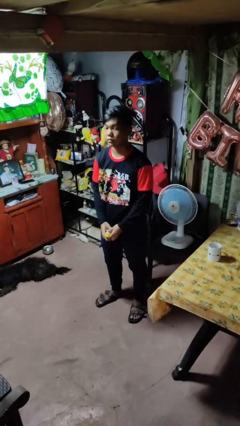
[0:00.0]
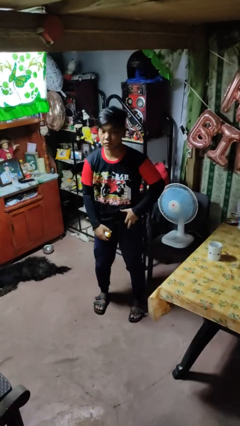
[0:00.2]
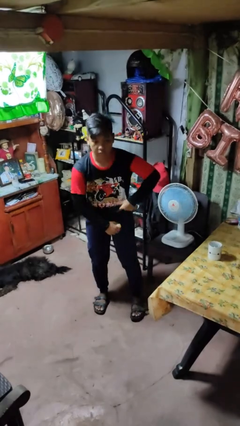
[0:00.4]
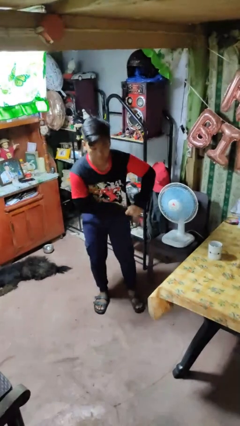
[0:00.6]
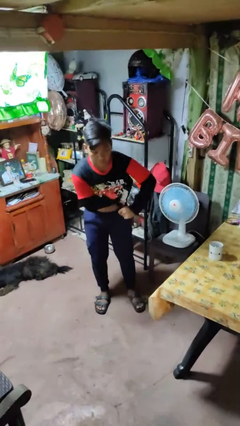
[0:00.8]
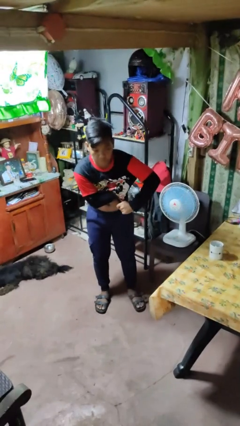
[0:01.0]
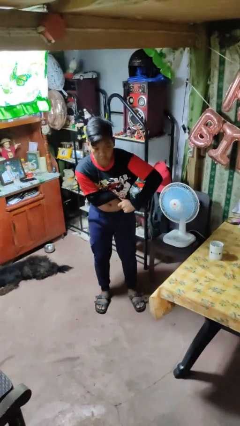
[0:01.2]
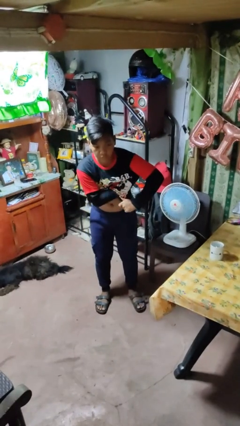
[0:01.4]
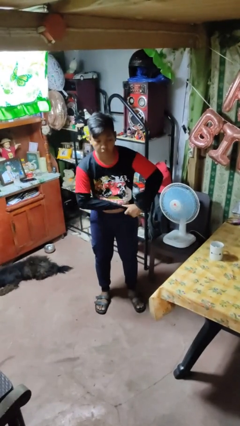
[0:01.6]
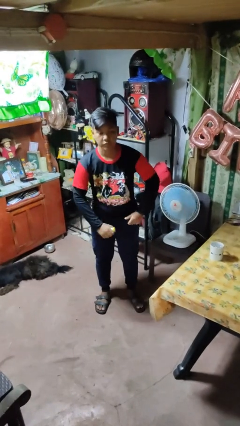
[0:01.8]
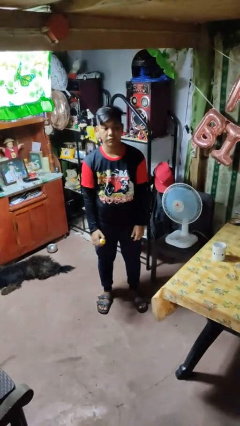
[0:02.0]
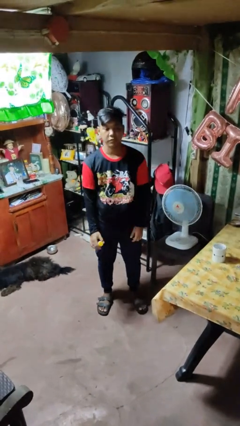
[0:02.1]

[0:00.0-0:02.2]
person applies deodorant

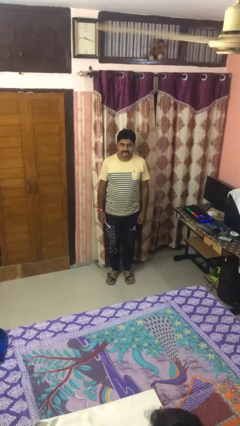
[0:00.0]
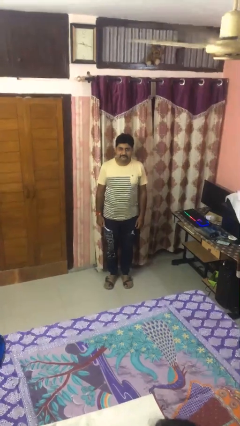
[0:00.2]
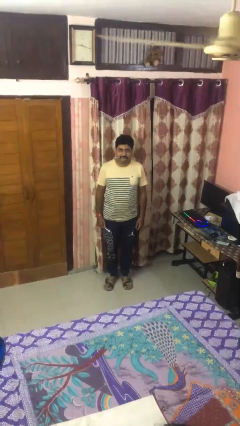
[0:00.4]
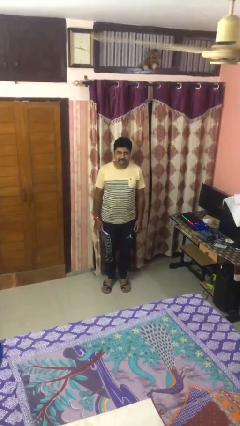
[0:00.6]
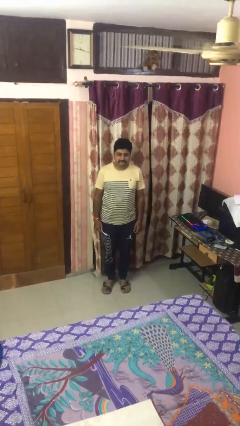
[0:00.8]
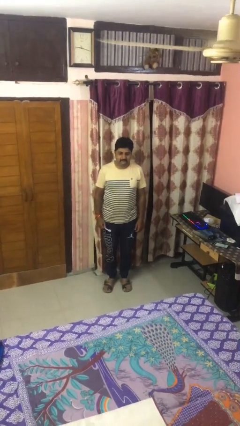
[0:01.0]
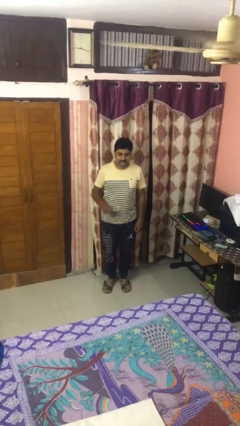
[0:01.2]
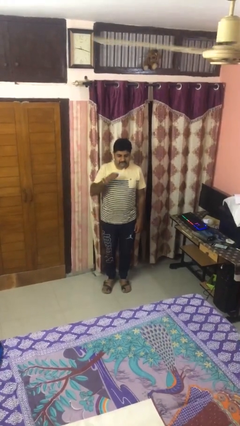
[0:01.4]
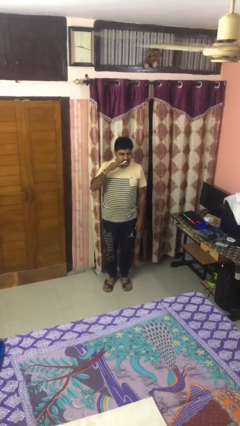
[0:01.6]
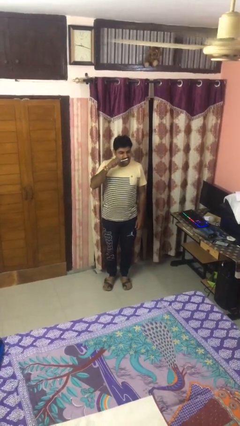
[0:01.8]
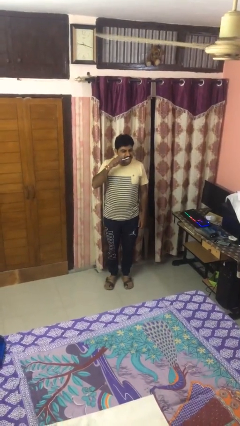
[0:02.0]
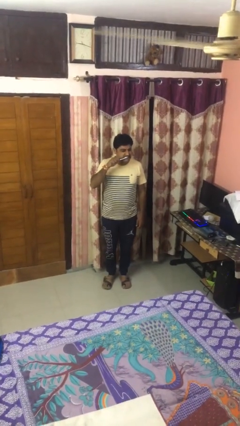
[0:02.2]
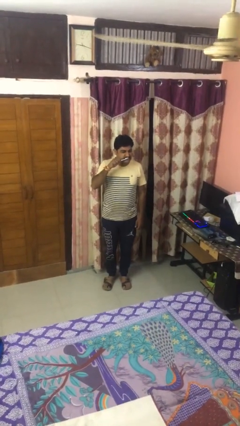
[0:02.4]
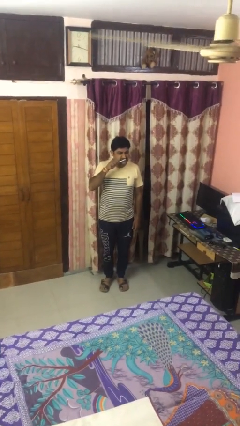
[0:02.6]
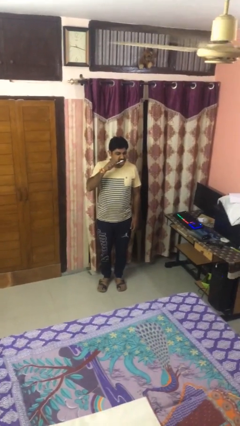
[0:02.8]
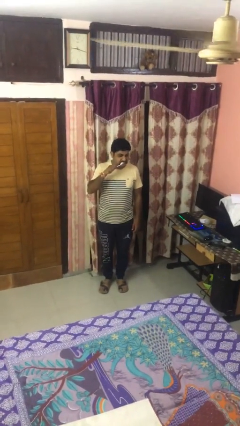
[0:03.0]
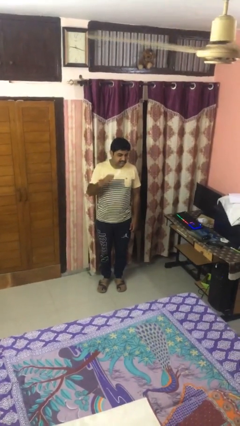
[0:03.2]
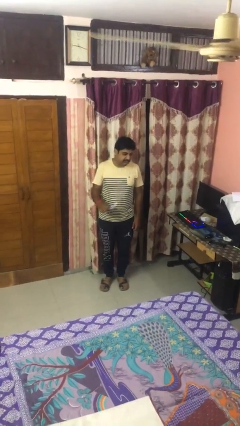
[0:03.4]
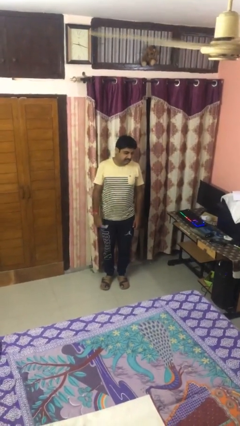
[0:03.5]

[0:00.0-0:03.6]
person brushes teeth

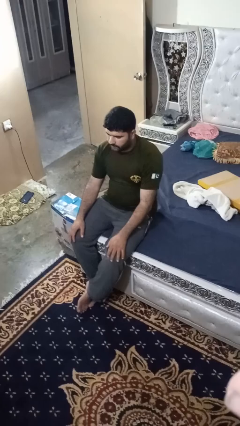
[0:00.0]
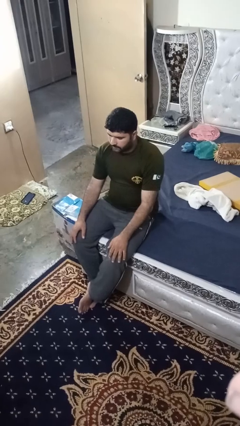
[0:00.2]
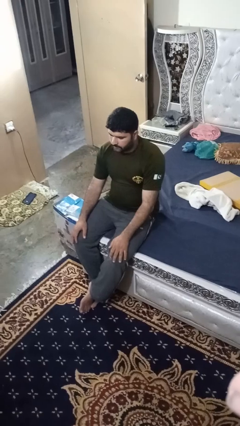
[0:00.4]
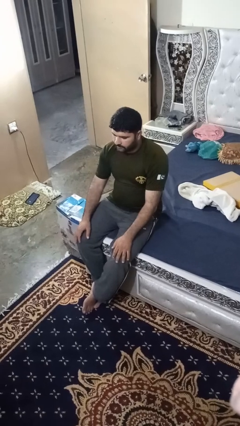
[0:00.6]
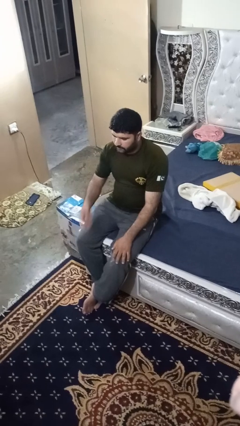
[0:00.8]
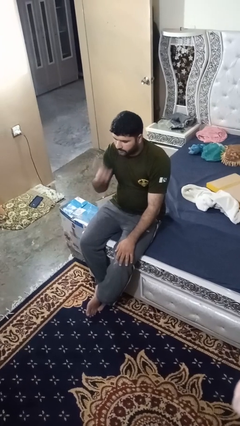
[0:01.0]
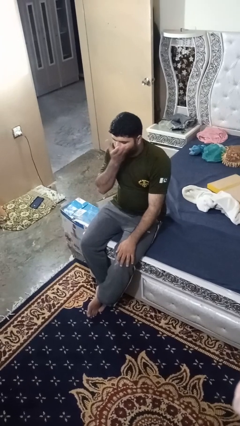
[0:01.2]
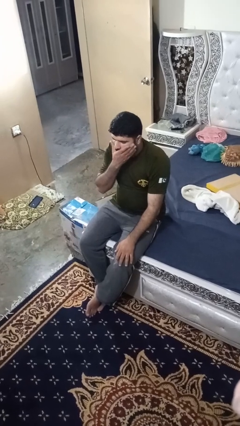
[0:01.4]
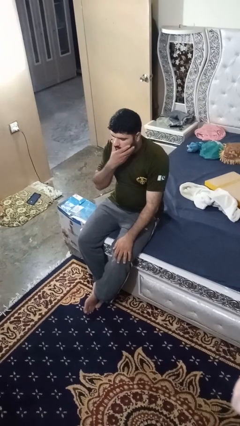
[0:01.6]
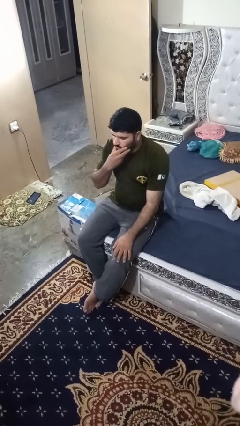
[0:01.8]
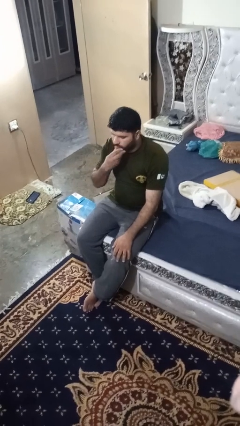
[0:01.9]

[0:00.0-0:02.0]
person strokes chin

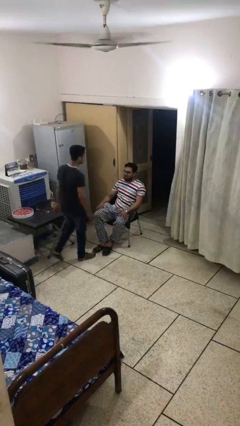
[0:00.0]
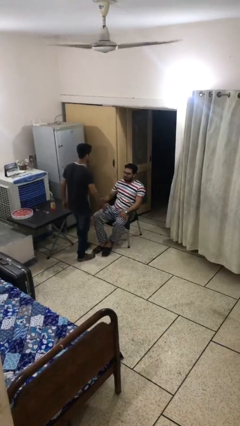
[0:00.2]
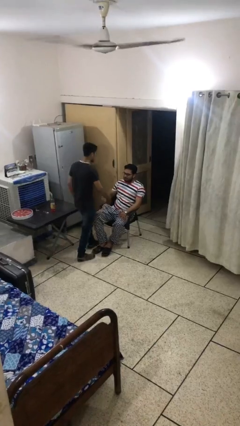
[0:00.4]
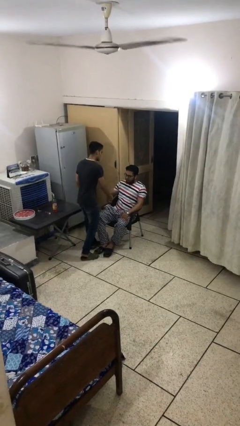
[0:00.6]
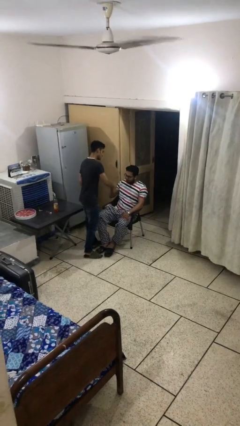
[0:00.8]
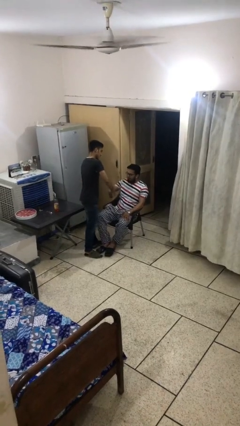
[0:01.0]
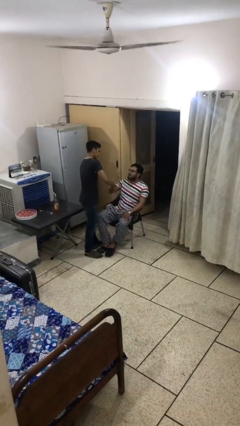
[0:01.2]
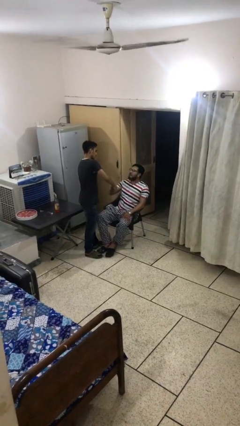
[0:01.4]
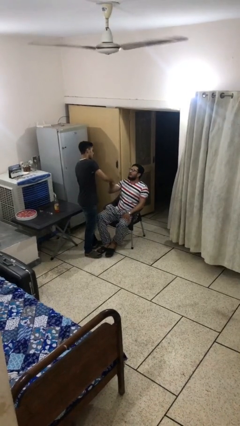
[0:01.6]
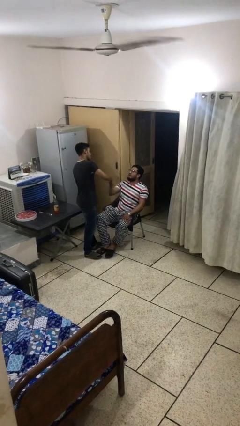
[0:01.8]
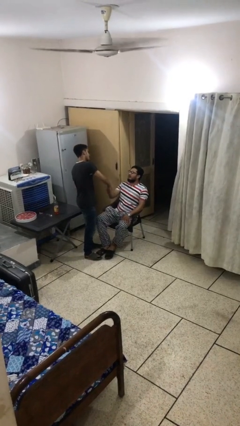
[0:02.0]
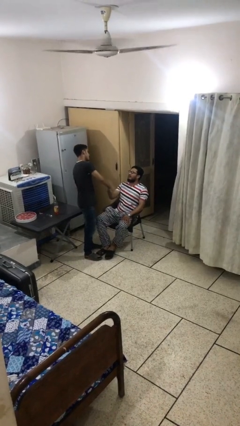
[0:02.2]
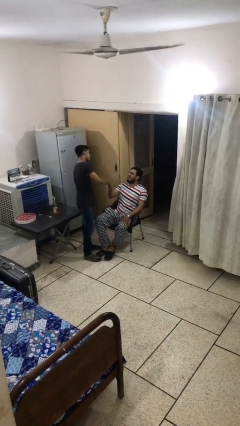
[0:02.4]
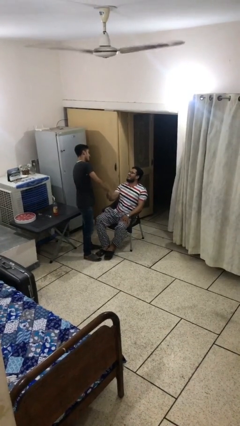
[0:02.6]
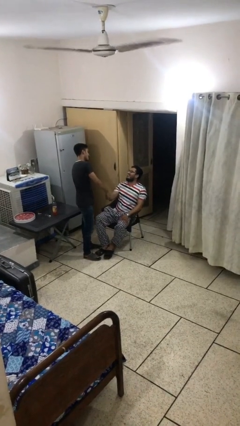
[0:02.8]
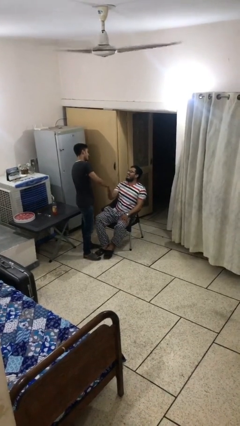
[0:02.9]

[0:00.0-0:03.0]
person shakes hand

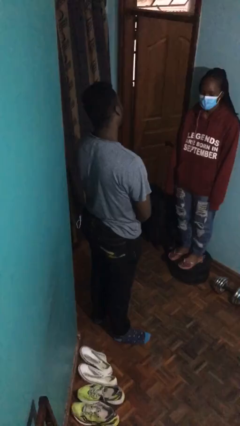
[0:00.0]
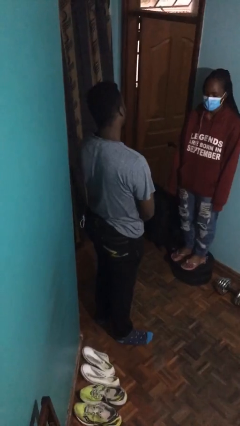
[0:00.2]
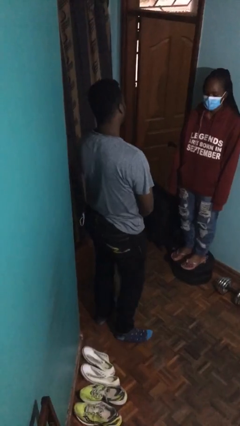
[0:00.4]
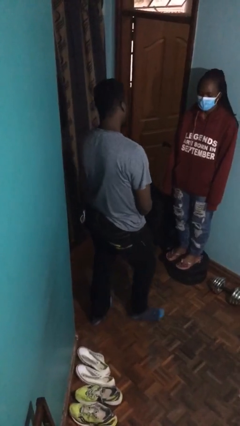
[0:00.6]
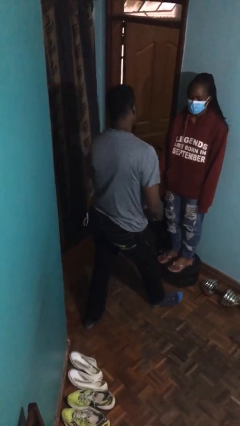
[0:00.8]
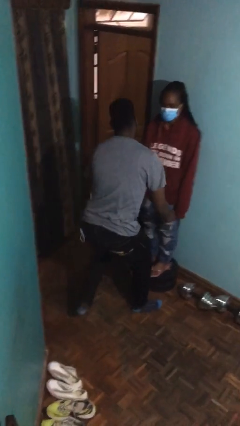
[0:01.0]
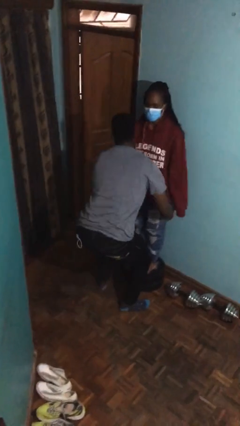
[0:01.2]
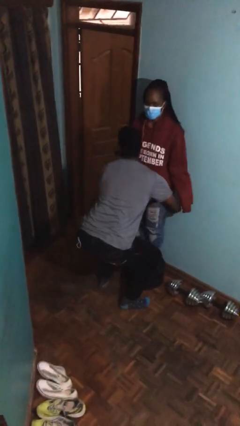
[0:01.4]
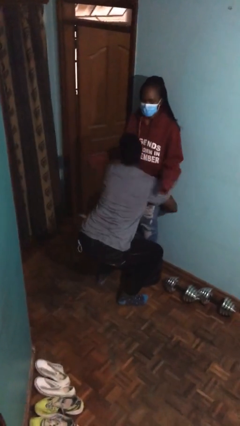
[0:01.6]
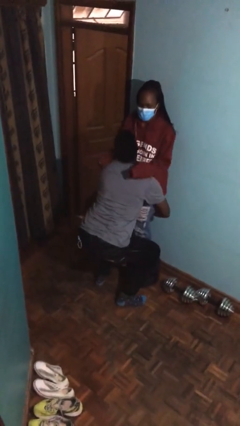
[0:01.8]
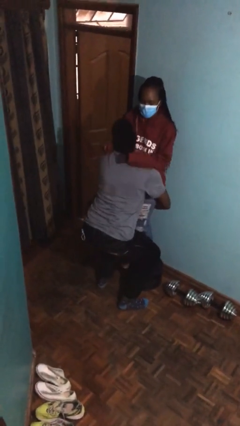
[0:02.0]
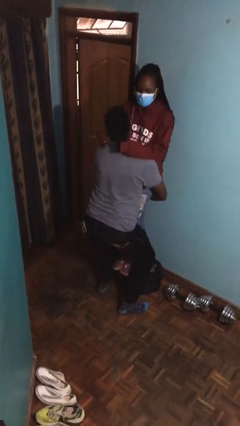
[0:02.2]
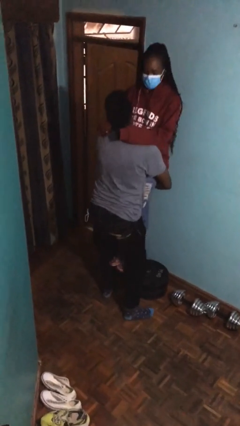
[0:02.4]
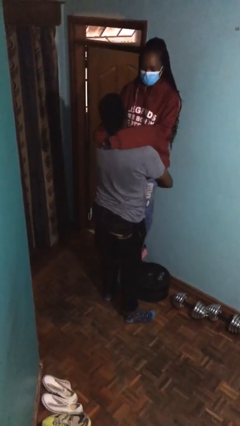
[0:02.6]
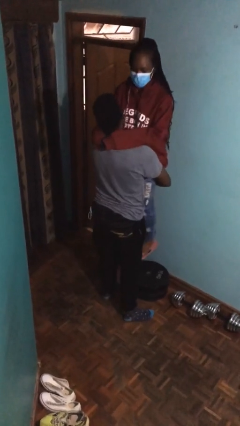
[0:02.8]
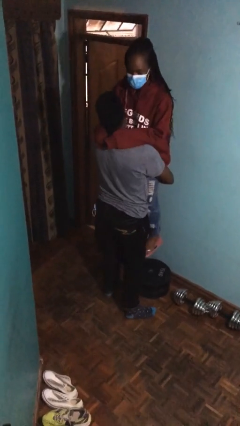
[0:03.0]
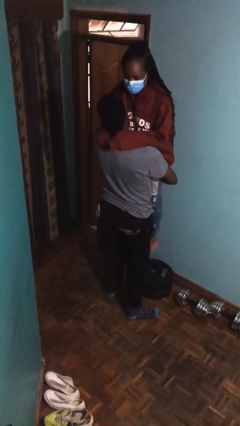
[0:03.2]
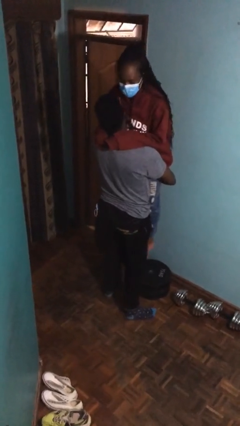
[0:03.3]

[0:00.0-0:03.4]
person picks up person

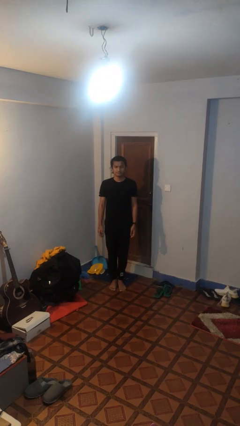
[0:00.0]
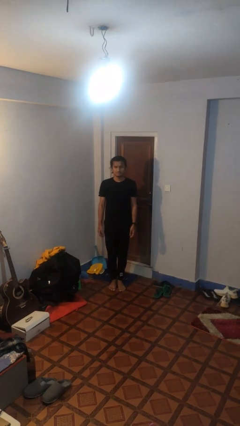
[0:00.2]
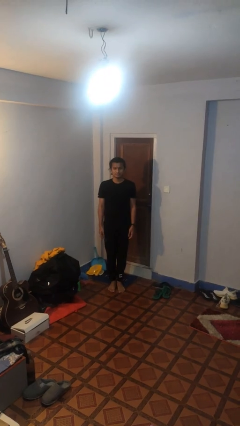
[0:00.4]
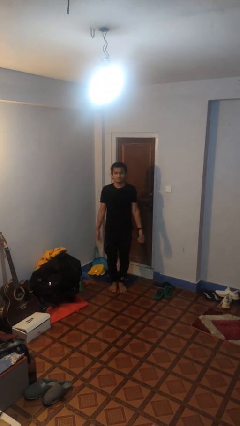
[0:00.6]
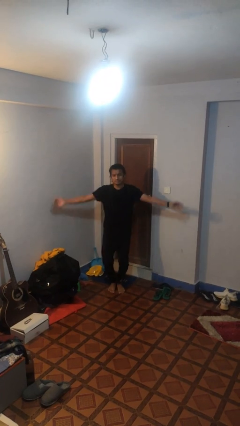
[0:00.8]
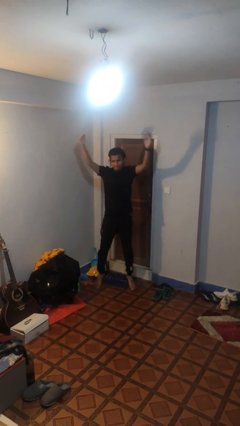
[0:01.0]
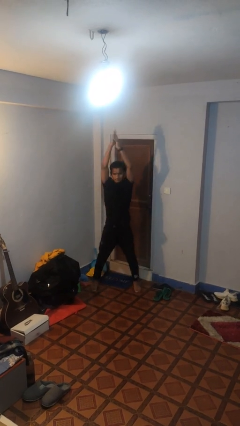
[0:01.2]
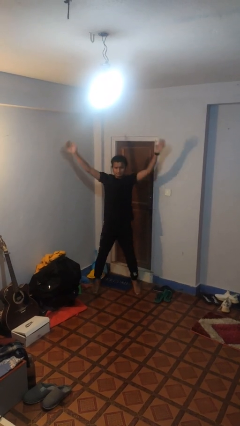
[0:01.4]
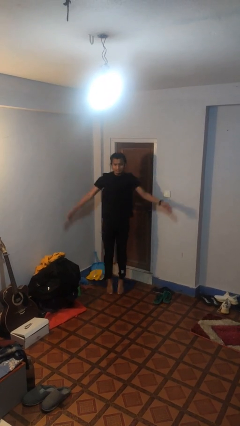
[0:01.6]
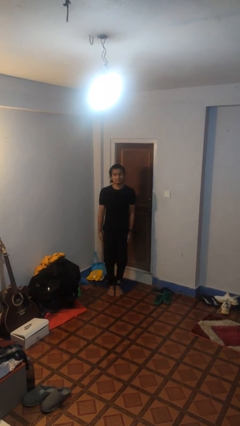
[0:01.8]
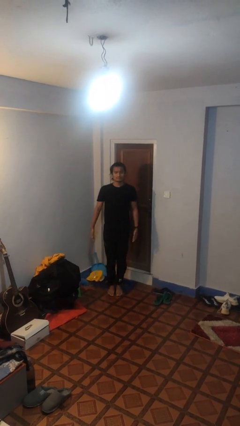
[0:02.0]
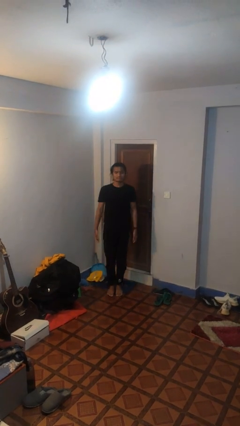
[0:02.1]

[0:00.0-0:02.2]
person exercises with jumping jacks

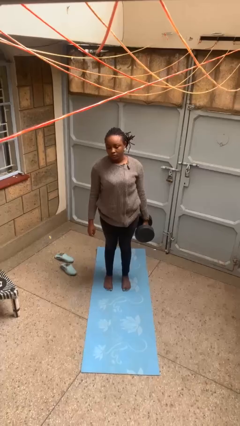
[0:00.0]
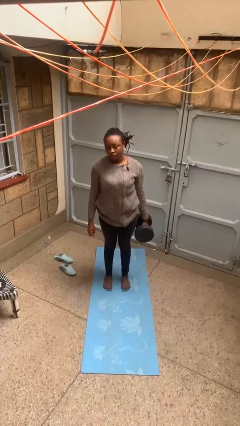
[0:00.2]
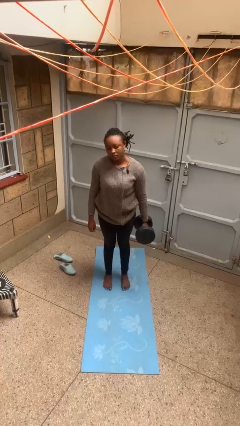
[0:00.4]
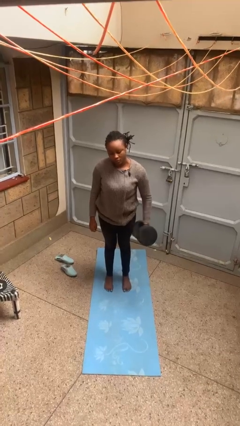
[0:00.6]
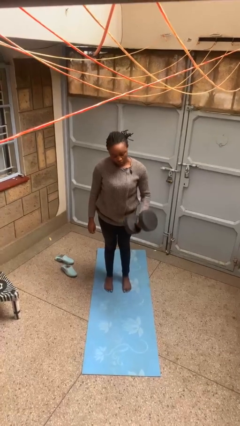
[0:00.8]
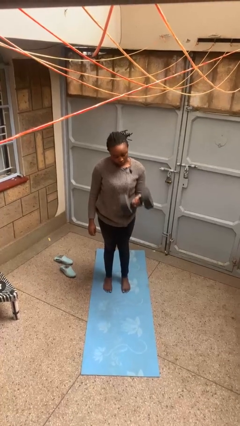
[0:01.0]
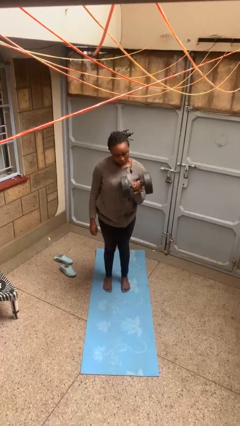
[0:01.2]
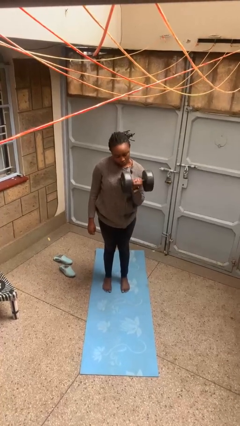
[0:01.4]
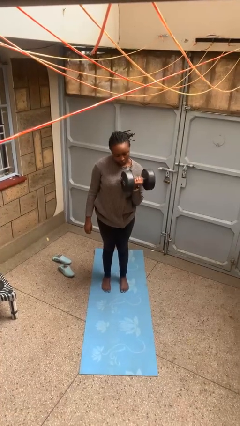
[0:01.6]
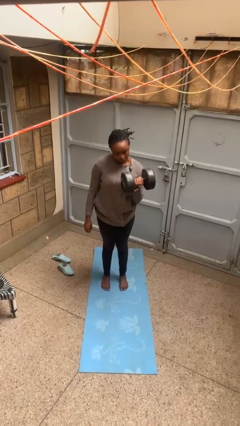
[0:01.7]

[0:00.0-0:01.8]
person lifts dumbbells
